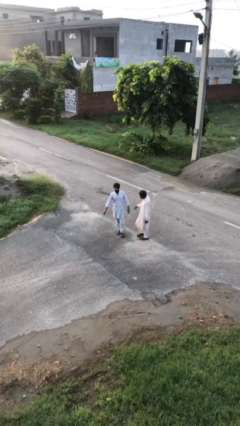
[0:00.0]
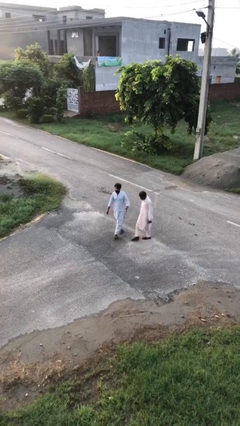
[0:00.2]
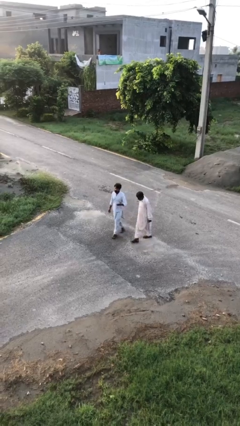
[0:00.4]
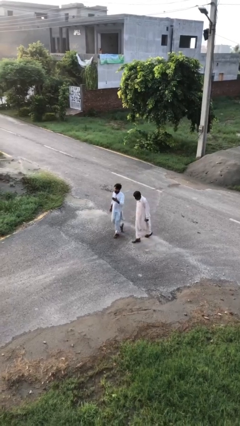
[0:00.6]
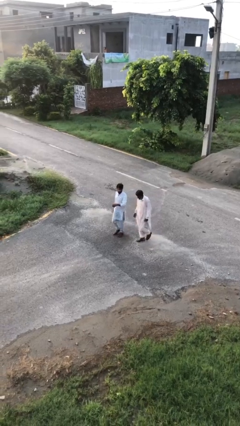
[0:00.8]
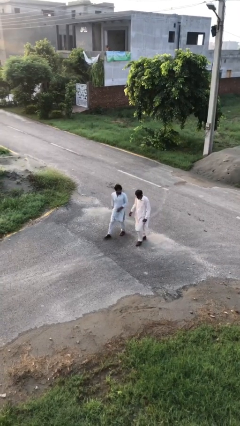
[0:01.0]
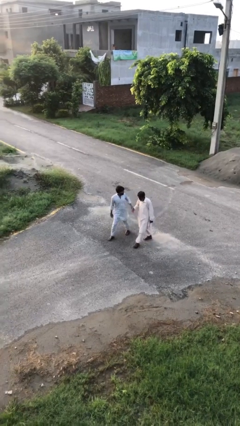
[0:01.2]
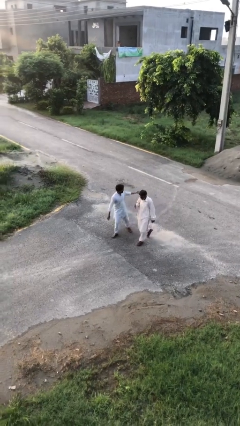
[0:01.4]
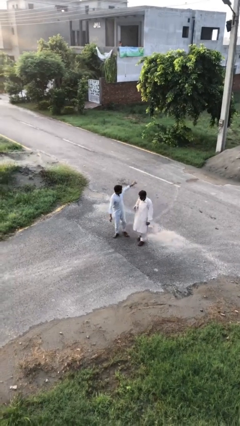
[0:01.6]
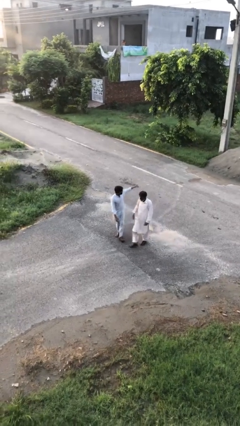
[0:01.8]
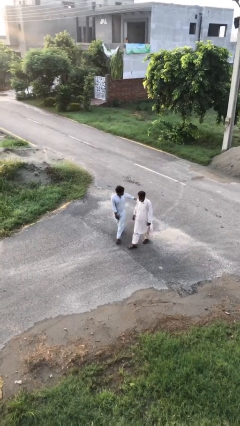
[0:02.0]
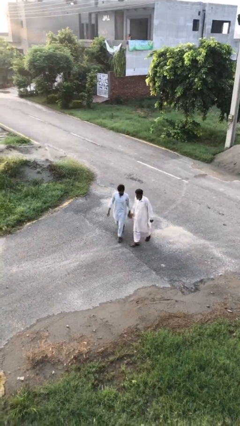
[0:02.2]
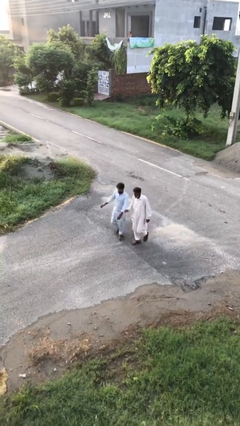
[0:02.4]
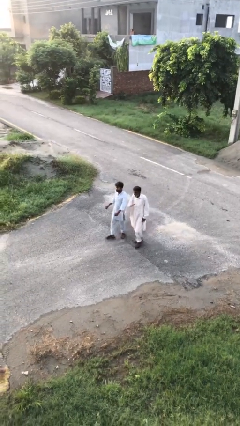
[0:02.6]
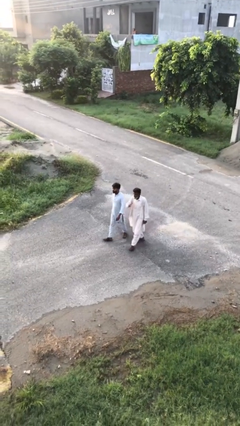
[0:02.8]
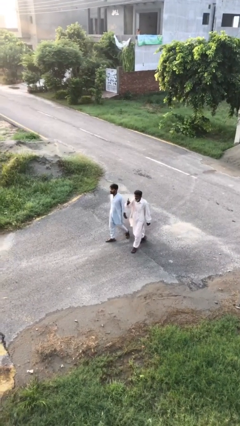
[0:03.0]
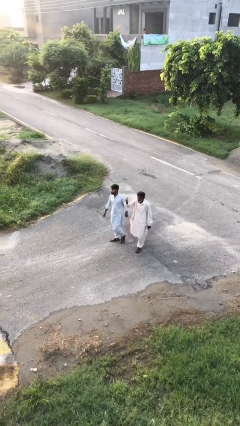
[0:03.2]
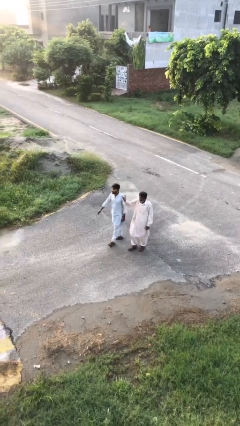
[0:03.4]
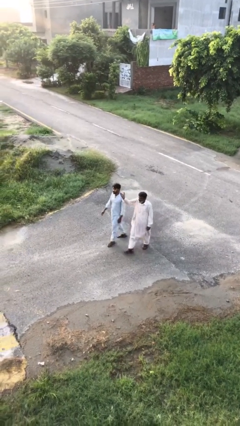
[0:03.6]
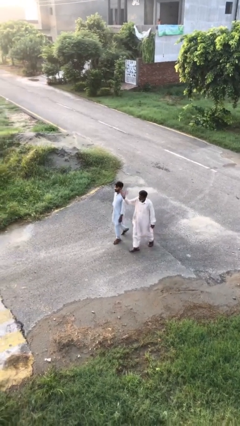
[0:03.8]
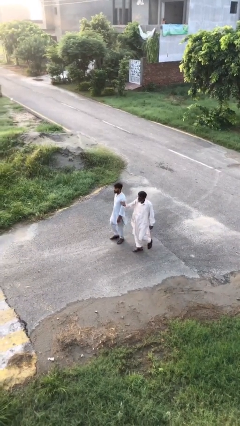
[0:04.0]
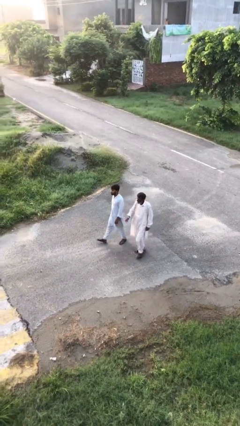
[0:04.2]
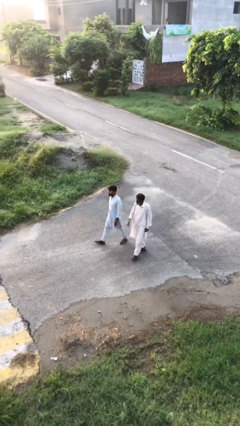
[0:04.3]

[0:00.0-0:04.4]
person talks to person

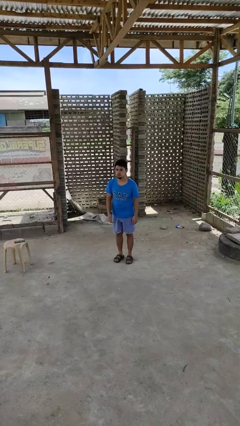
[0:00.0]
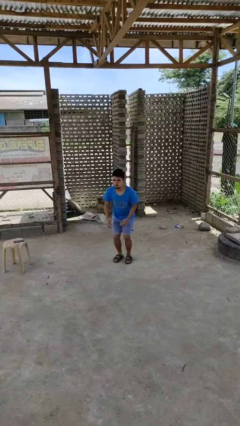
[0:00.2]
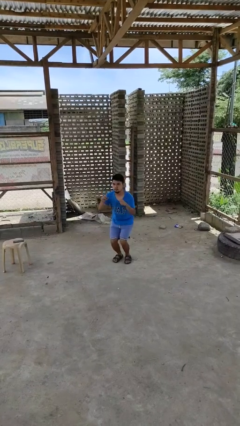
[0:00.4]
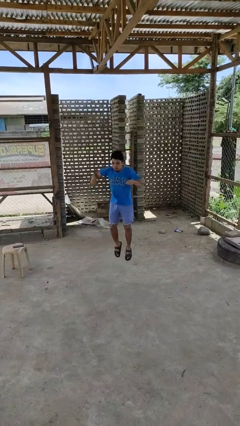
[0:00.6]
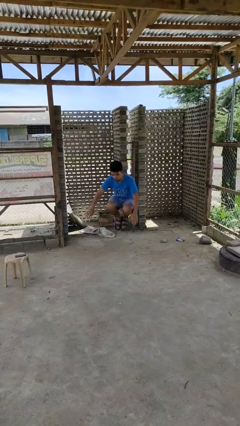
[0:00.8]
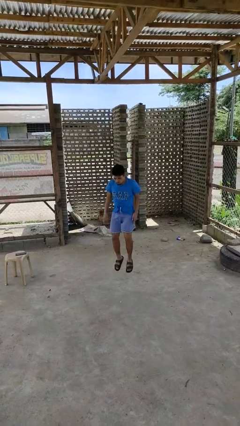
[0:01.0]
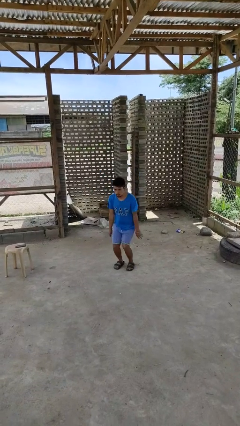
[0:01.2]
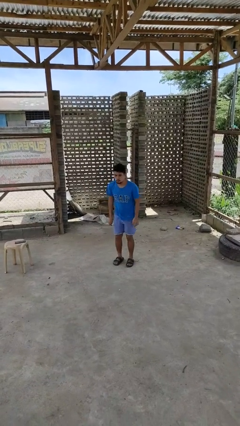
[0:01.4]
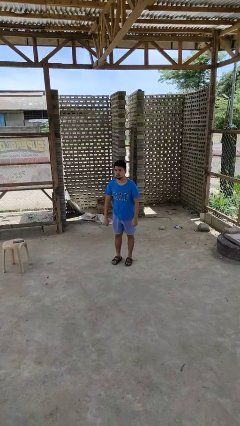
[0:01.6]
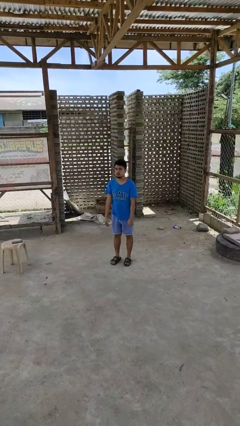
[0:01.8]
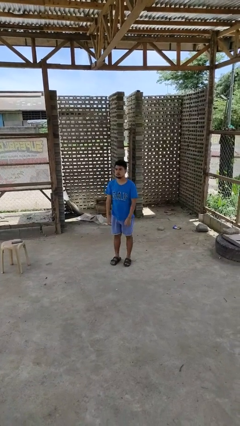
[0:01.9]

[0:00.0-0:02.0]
person jumps

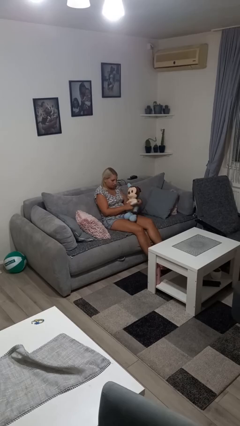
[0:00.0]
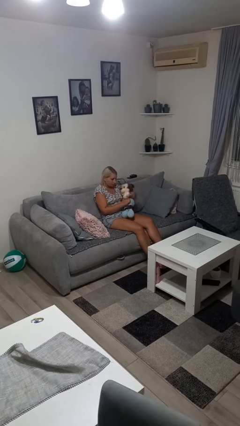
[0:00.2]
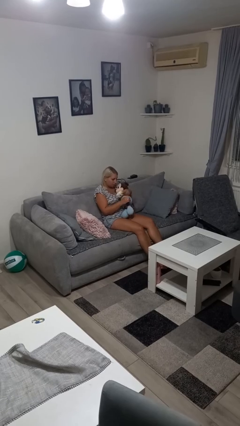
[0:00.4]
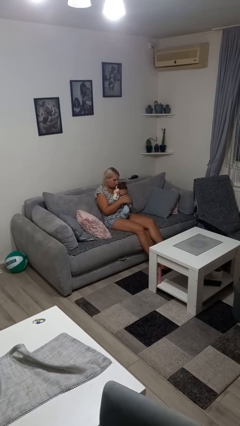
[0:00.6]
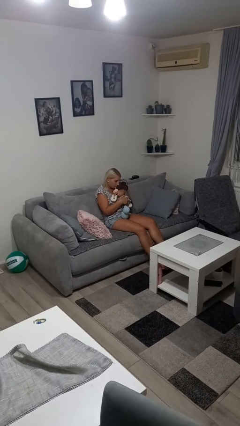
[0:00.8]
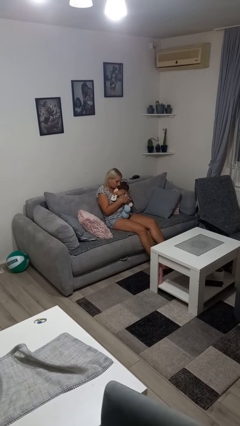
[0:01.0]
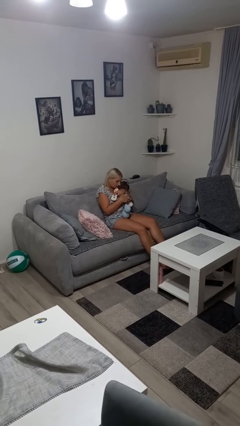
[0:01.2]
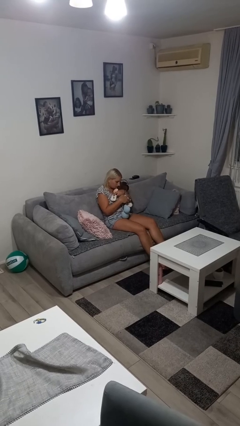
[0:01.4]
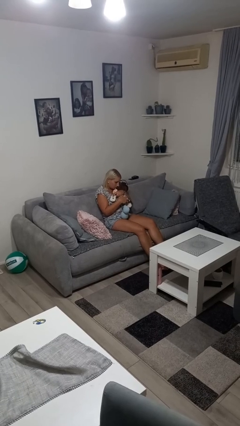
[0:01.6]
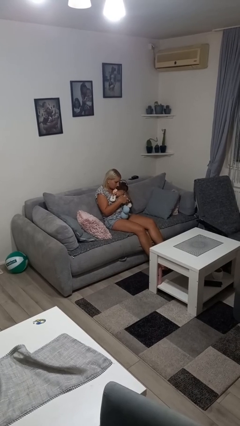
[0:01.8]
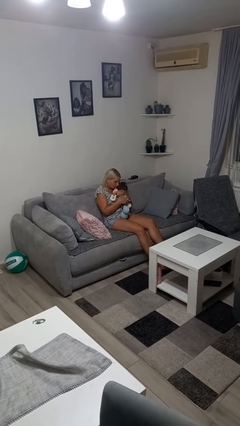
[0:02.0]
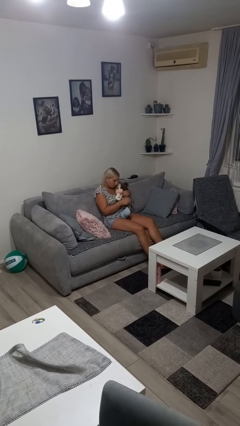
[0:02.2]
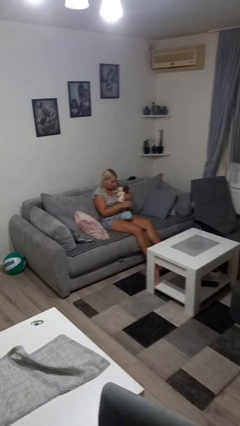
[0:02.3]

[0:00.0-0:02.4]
person hugs stuffed animal

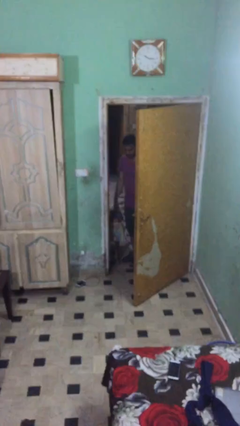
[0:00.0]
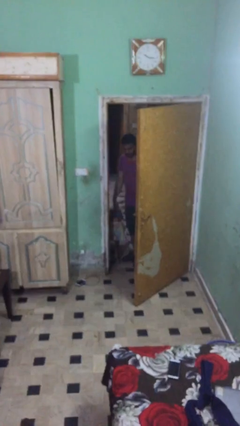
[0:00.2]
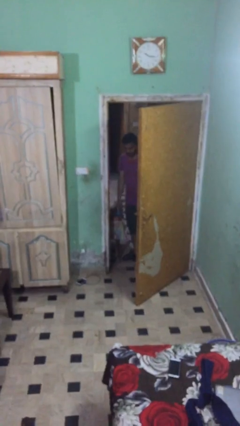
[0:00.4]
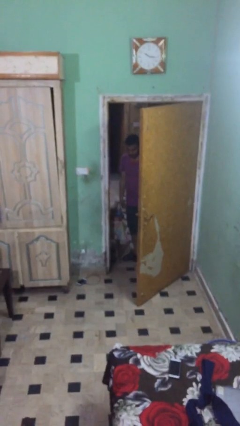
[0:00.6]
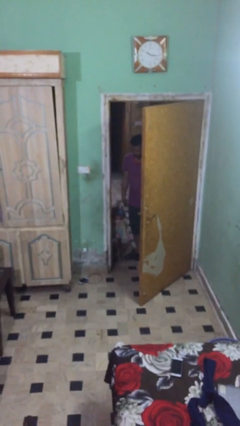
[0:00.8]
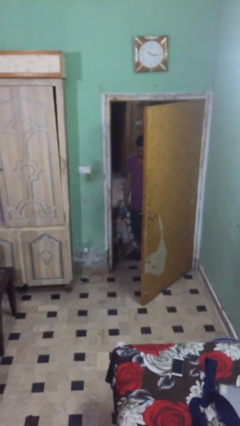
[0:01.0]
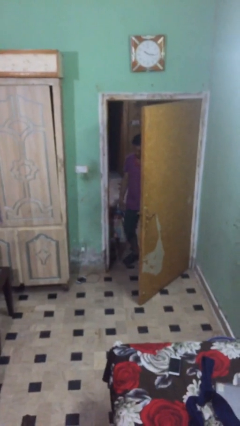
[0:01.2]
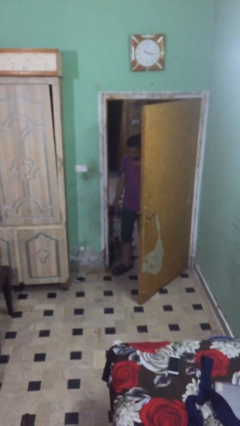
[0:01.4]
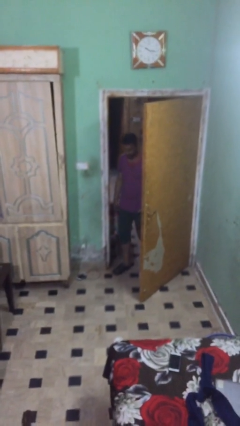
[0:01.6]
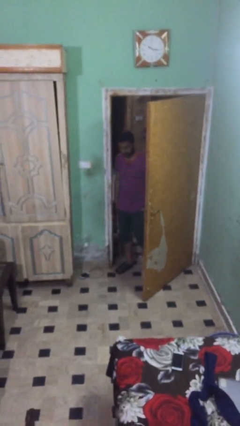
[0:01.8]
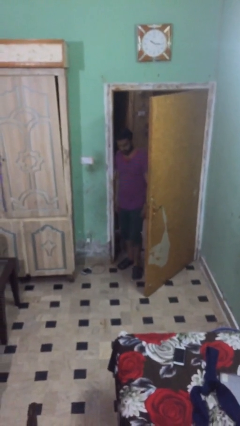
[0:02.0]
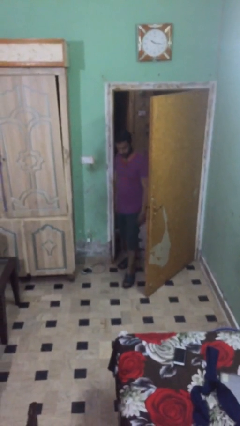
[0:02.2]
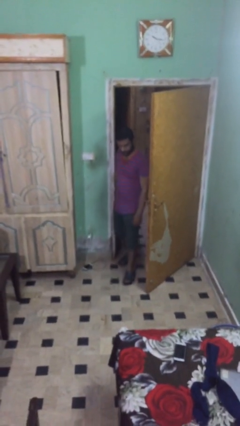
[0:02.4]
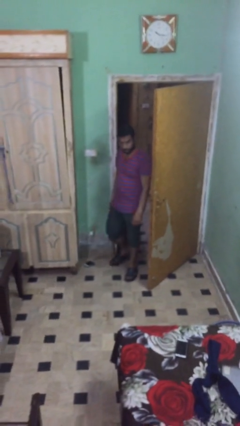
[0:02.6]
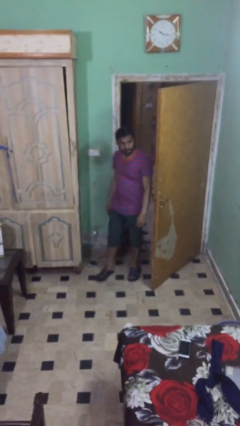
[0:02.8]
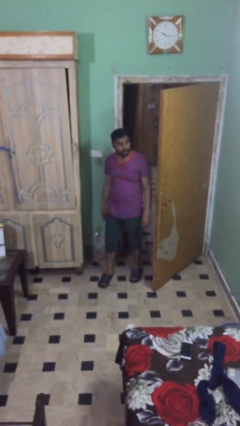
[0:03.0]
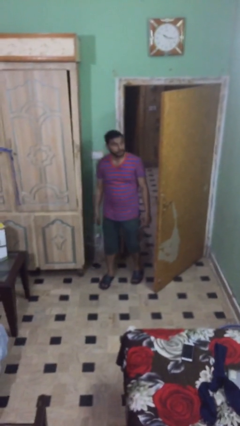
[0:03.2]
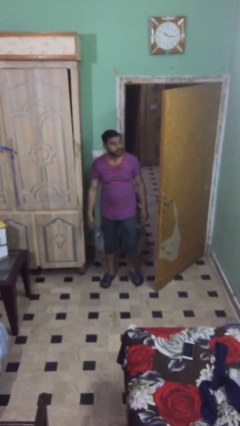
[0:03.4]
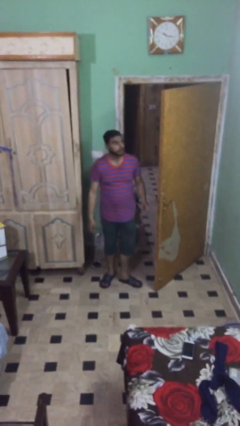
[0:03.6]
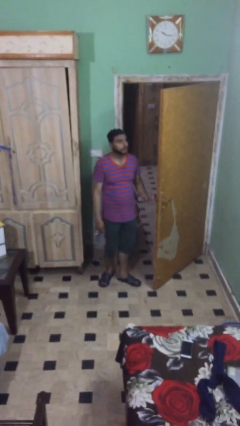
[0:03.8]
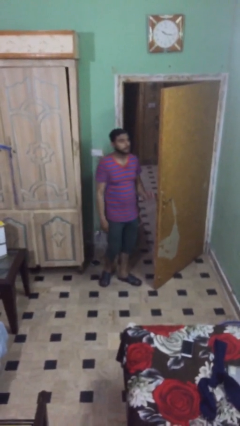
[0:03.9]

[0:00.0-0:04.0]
person enters scene through structure

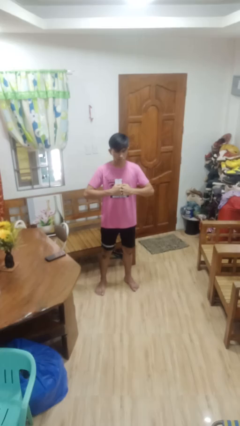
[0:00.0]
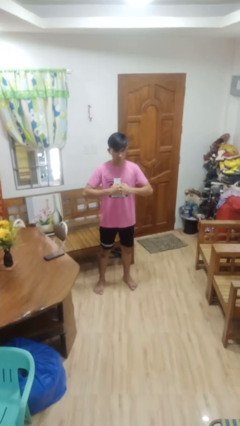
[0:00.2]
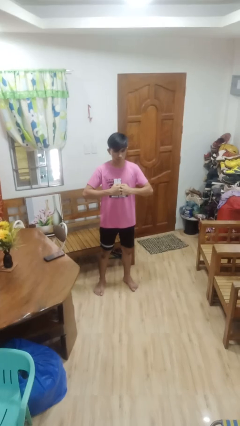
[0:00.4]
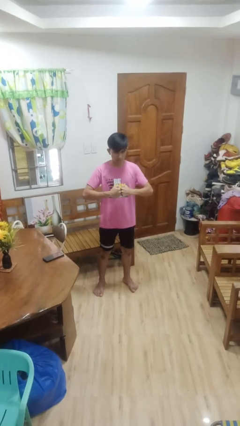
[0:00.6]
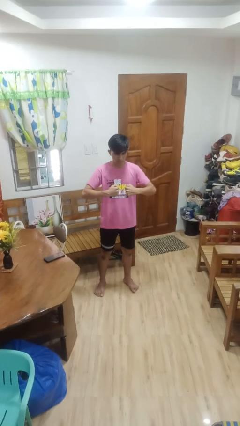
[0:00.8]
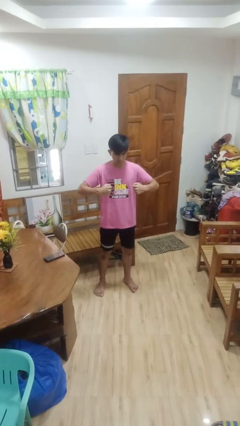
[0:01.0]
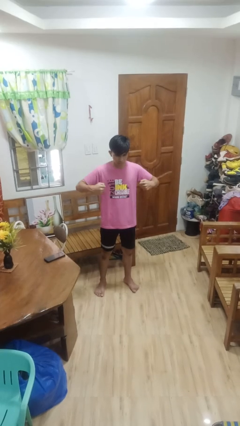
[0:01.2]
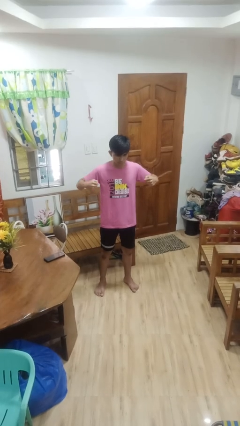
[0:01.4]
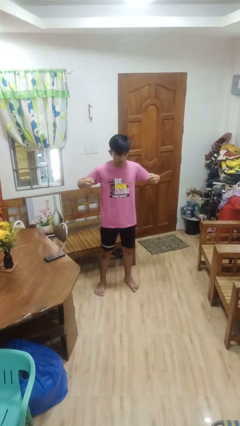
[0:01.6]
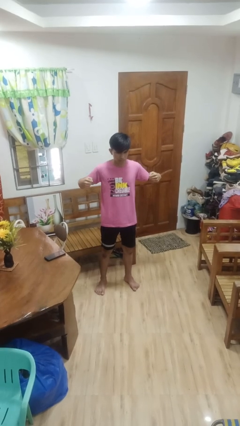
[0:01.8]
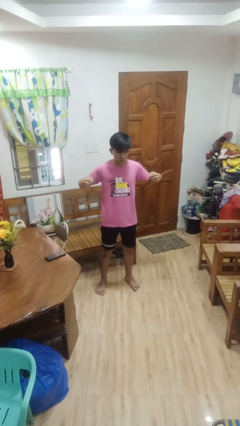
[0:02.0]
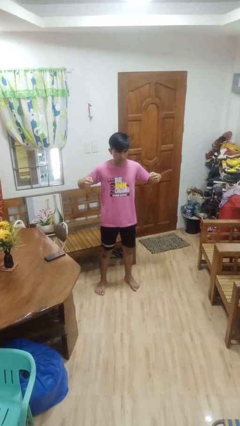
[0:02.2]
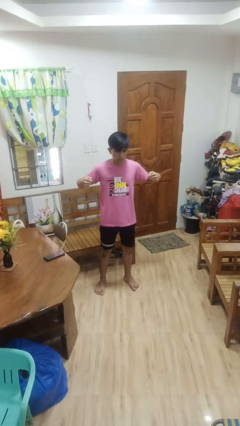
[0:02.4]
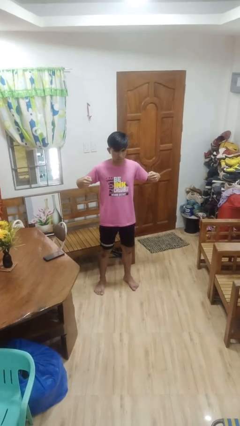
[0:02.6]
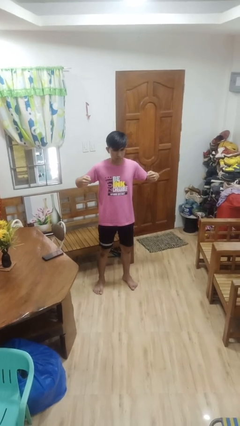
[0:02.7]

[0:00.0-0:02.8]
person gestures zoom in

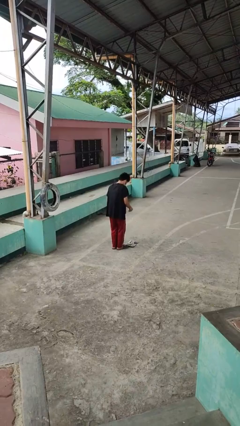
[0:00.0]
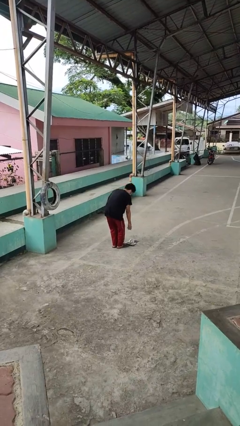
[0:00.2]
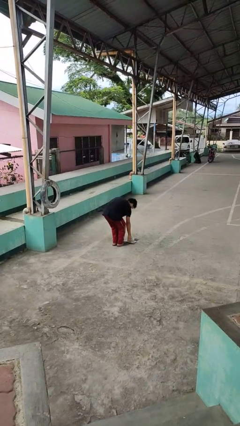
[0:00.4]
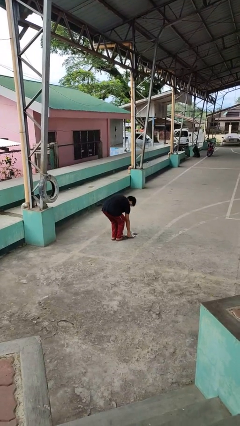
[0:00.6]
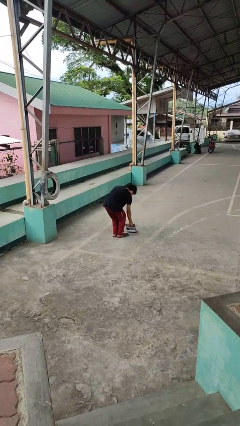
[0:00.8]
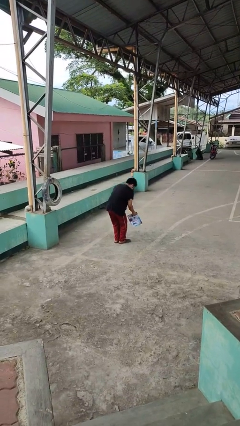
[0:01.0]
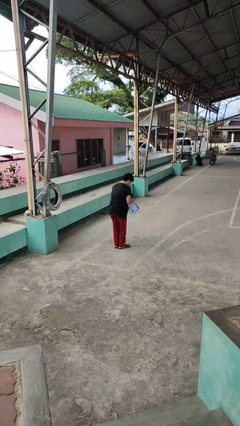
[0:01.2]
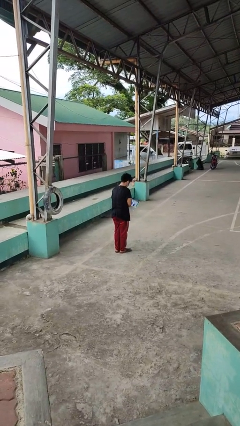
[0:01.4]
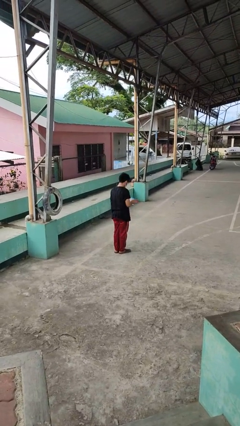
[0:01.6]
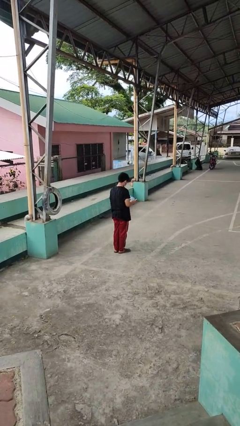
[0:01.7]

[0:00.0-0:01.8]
person picks up object from floor
